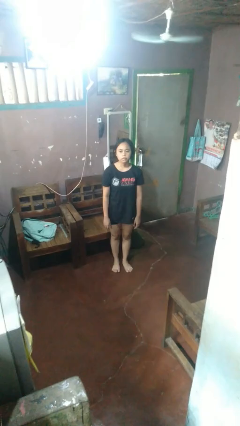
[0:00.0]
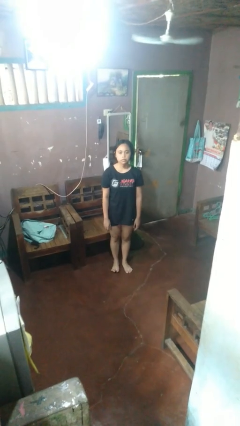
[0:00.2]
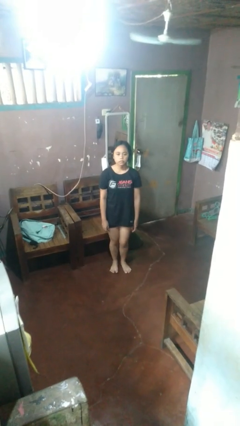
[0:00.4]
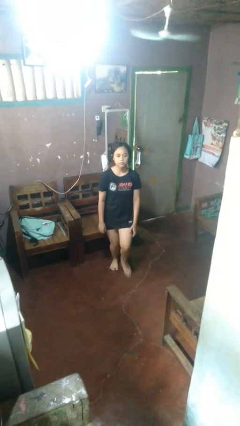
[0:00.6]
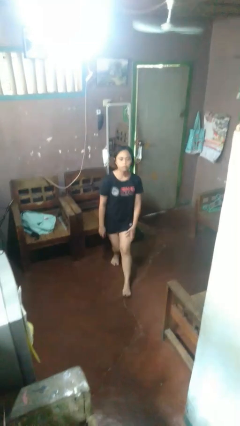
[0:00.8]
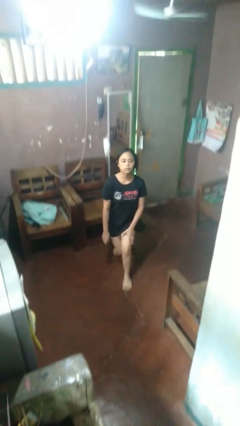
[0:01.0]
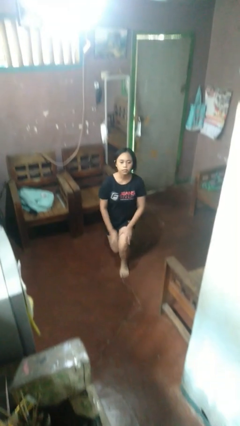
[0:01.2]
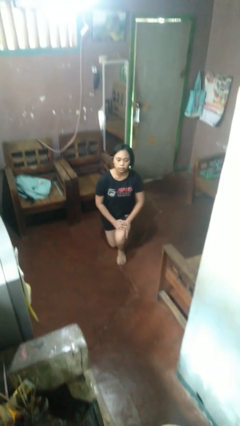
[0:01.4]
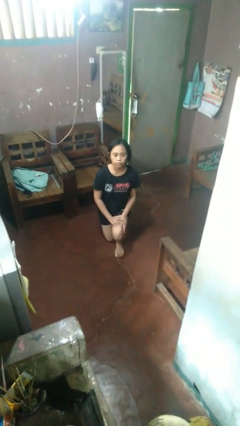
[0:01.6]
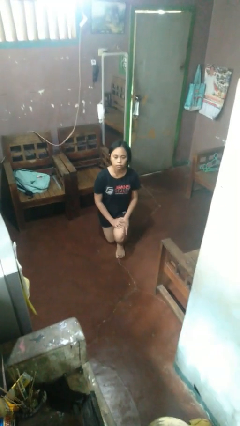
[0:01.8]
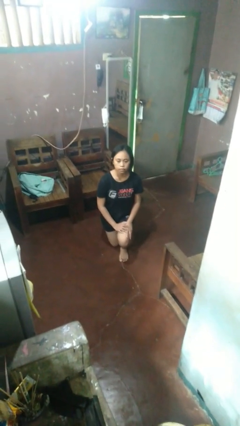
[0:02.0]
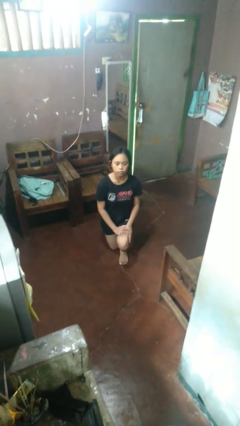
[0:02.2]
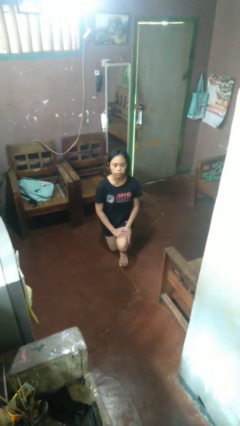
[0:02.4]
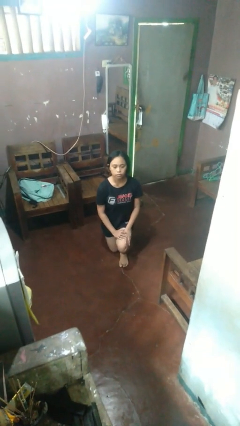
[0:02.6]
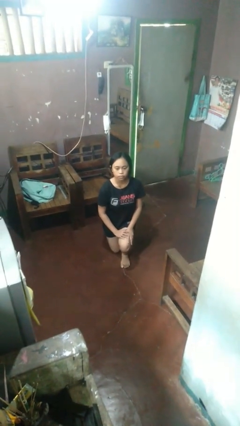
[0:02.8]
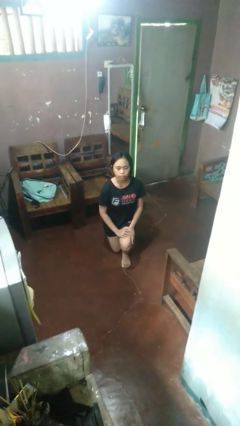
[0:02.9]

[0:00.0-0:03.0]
person kneels

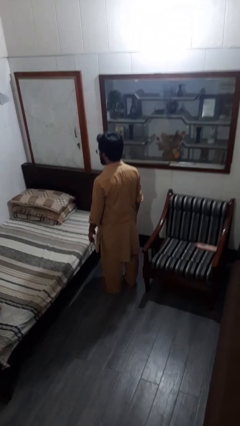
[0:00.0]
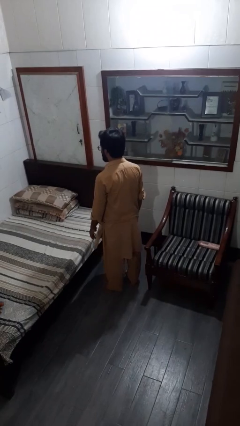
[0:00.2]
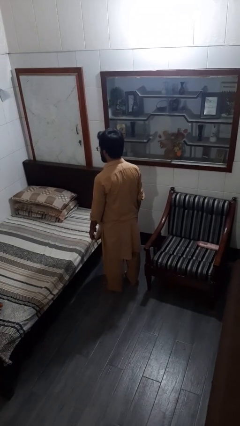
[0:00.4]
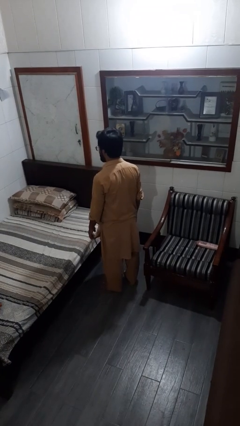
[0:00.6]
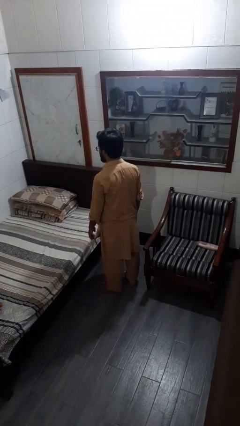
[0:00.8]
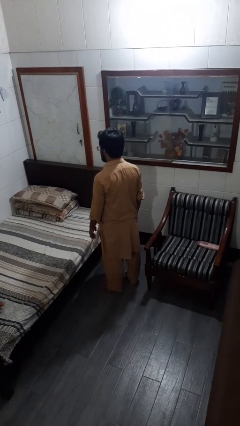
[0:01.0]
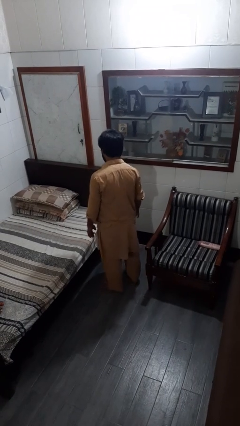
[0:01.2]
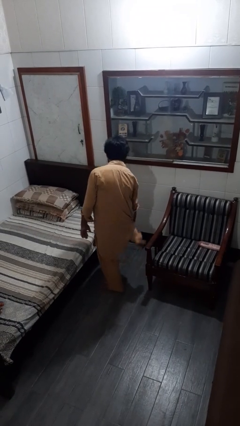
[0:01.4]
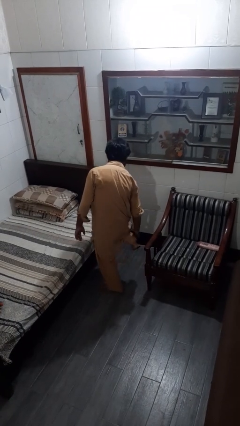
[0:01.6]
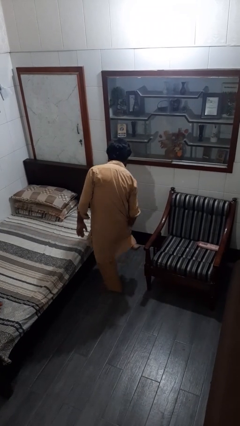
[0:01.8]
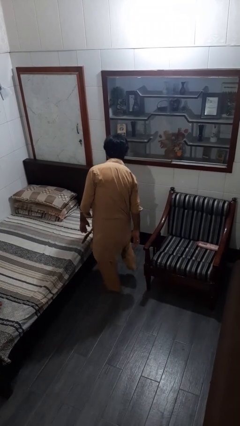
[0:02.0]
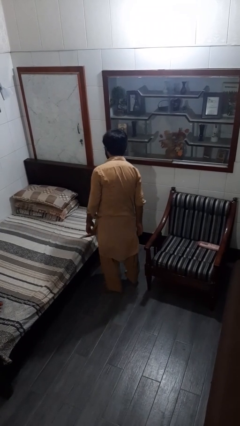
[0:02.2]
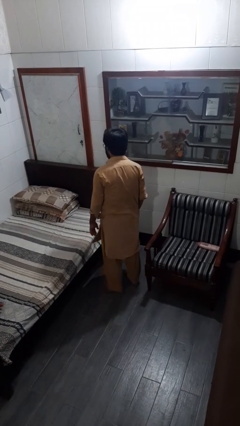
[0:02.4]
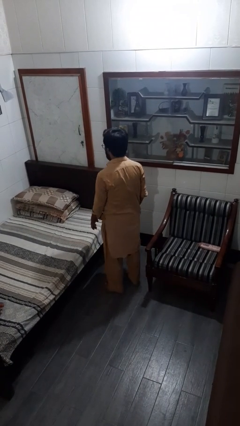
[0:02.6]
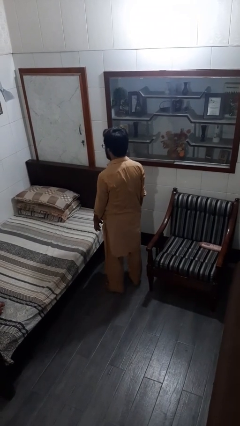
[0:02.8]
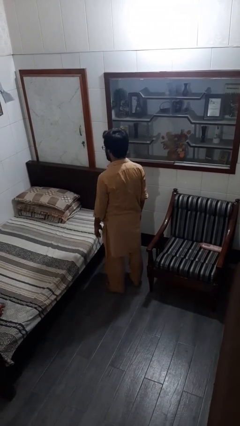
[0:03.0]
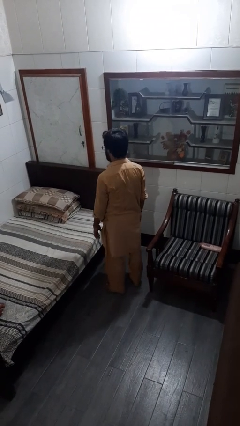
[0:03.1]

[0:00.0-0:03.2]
person swats bug

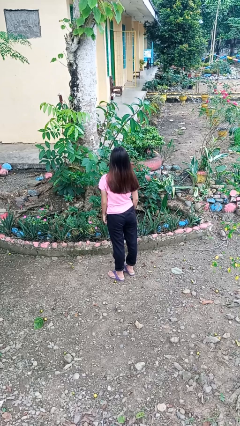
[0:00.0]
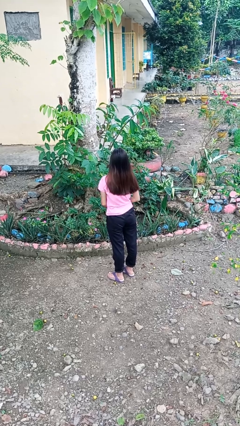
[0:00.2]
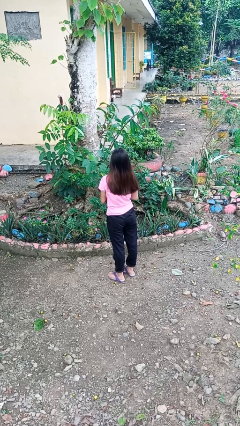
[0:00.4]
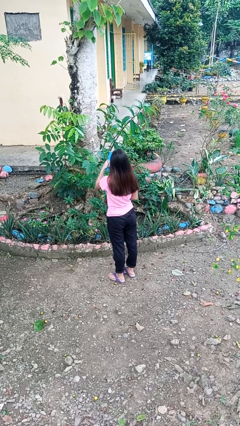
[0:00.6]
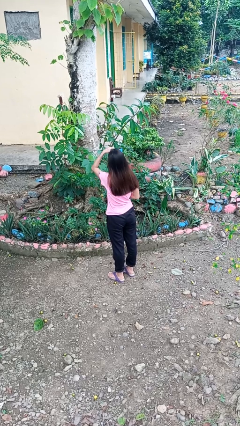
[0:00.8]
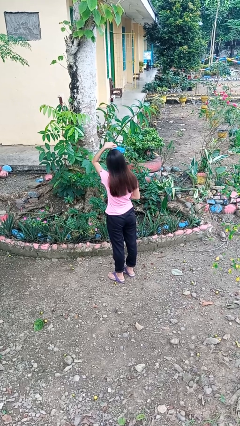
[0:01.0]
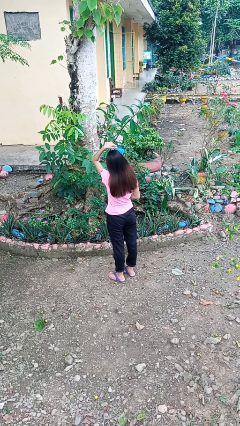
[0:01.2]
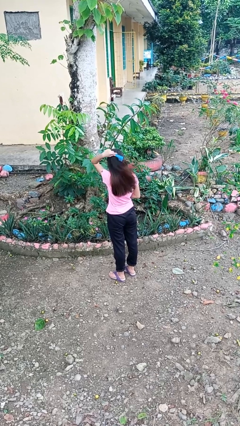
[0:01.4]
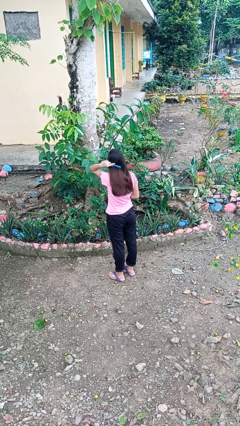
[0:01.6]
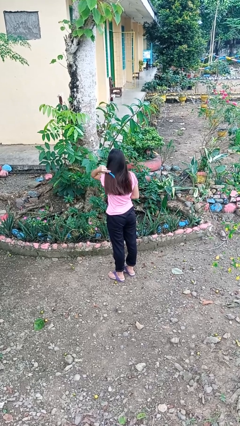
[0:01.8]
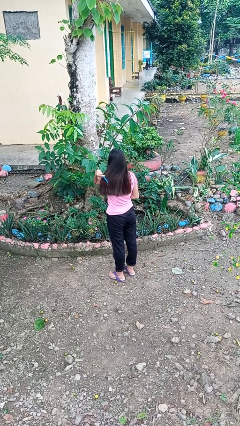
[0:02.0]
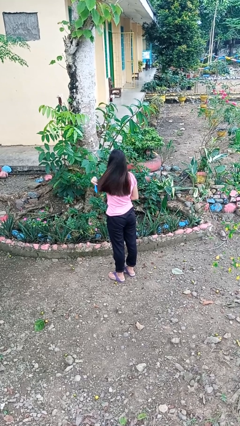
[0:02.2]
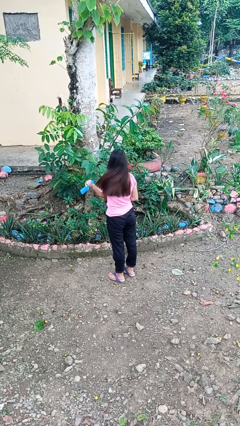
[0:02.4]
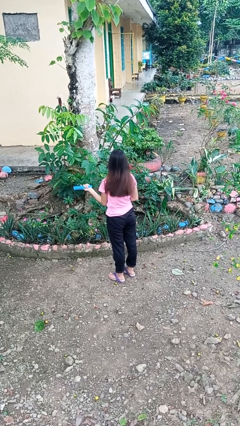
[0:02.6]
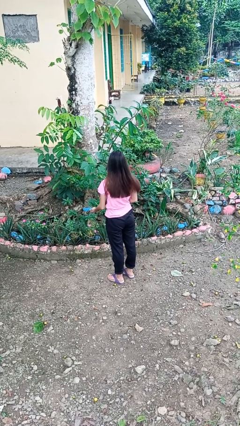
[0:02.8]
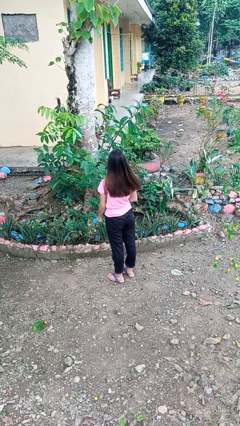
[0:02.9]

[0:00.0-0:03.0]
person brushes hair

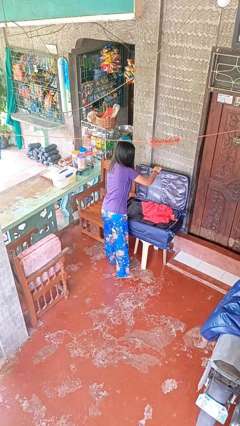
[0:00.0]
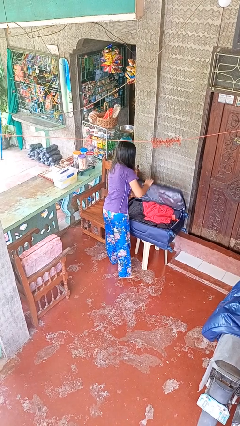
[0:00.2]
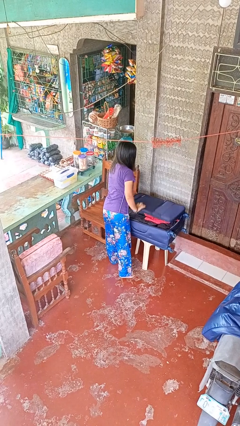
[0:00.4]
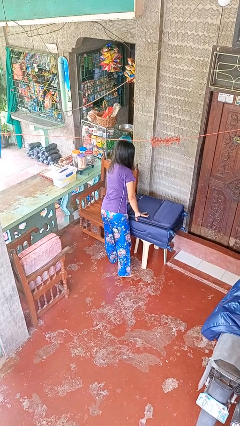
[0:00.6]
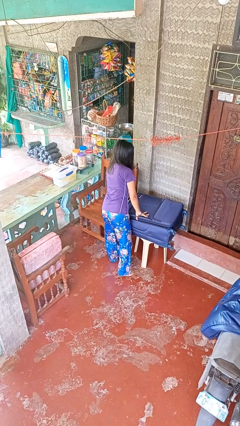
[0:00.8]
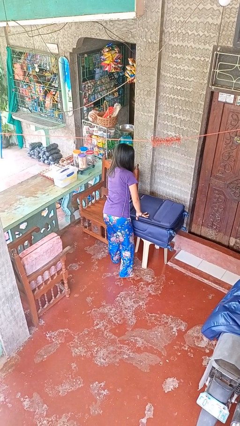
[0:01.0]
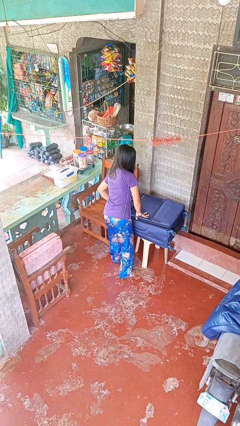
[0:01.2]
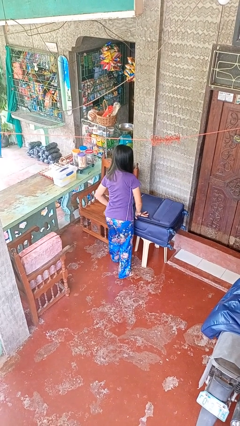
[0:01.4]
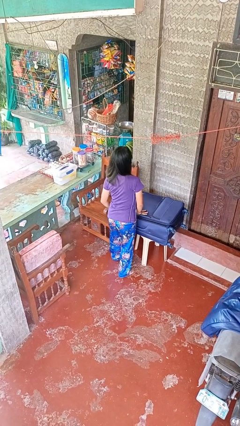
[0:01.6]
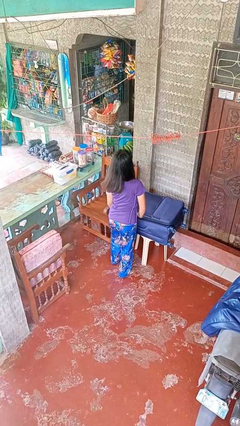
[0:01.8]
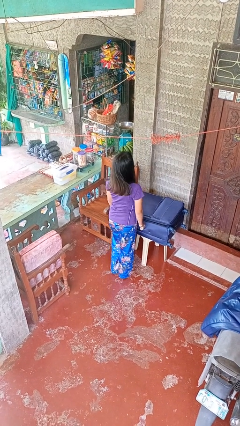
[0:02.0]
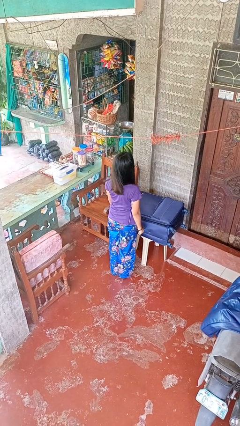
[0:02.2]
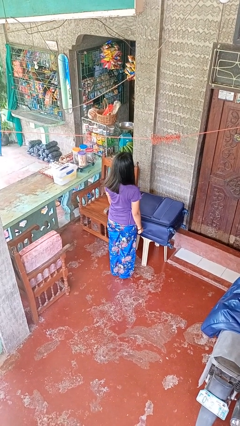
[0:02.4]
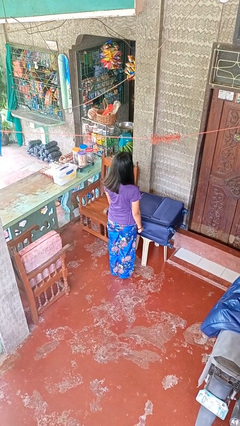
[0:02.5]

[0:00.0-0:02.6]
person closes suitcase

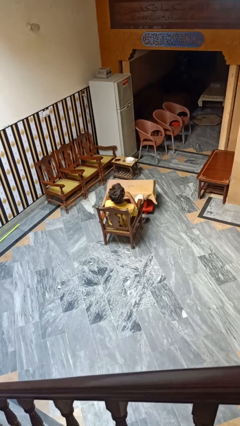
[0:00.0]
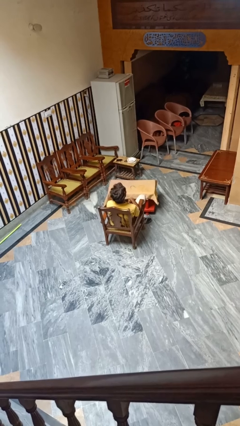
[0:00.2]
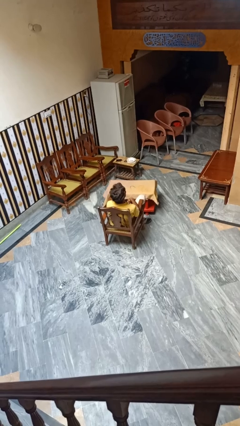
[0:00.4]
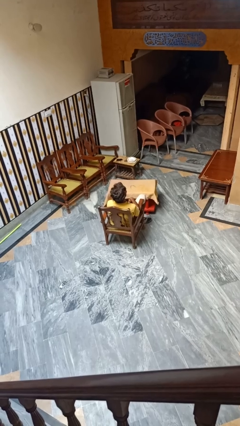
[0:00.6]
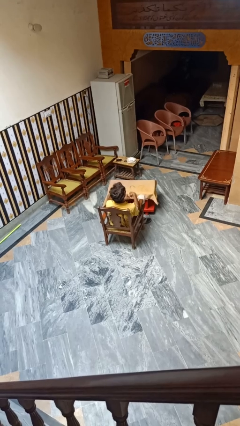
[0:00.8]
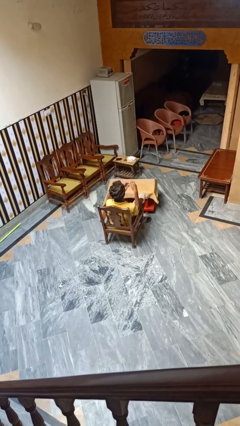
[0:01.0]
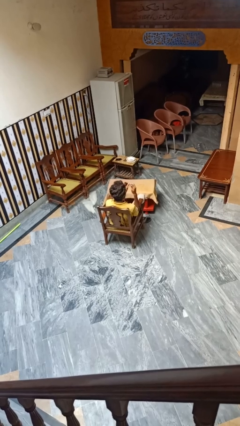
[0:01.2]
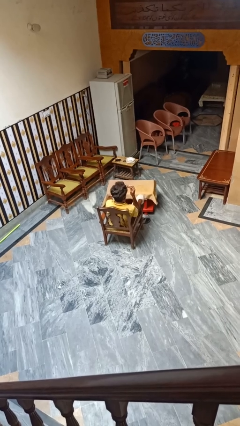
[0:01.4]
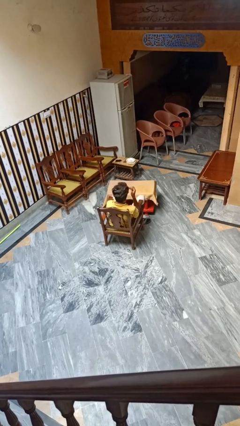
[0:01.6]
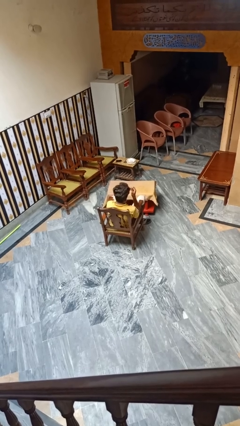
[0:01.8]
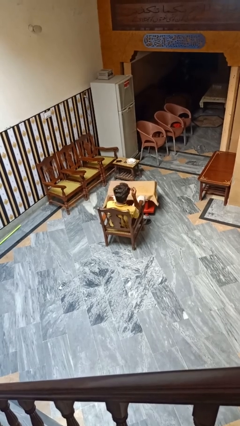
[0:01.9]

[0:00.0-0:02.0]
person clips fingernails

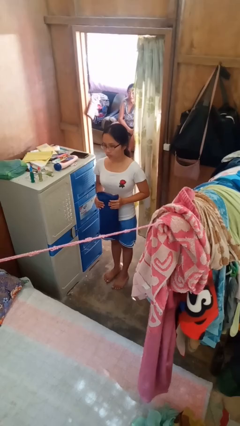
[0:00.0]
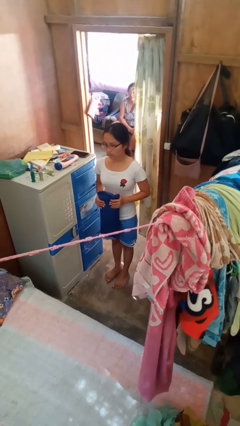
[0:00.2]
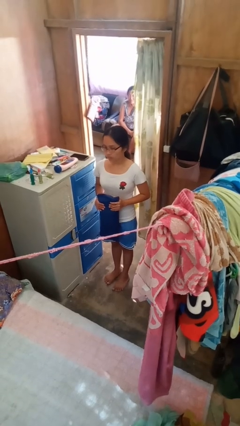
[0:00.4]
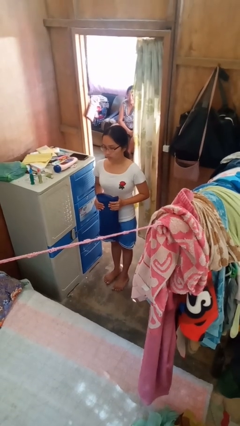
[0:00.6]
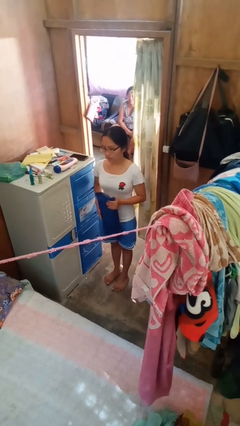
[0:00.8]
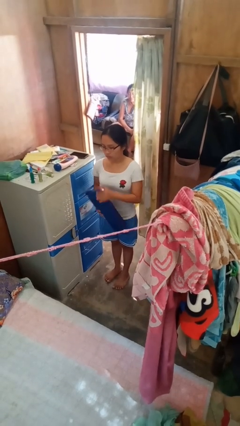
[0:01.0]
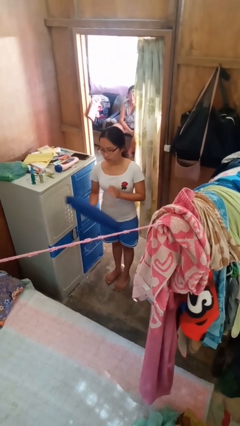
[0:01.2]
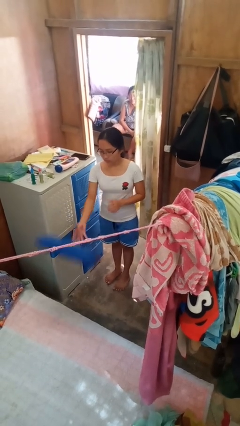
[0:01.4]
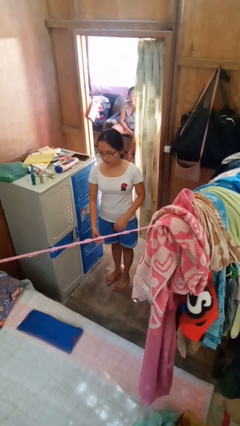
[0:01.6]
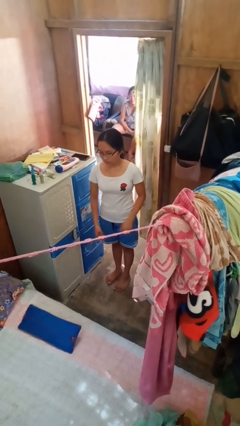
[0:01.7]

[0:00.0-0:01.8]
person throws object on bed

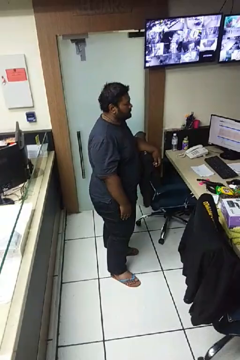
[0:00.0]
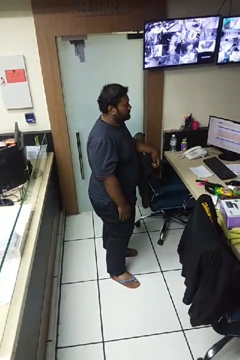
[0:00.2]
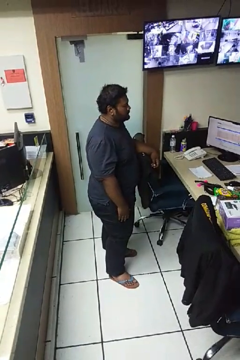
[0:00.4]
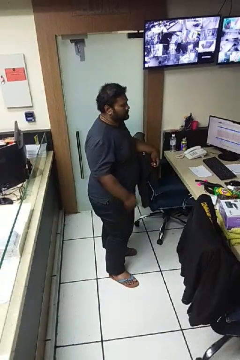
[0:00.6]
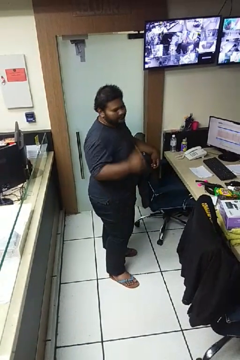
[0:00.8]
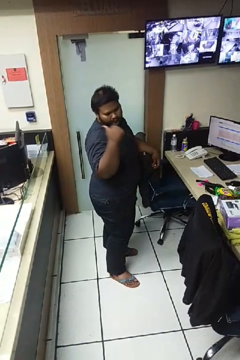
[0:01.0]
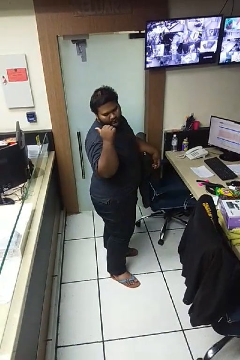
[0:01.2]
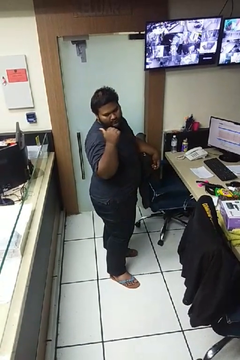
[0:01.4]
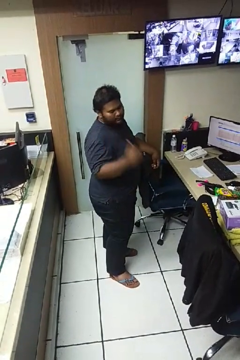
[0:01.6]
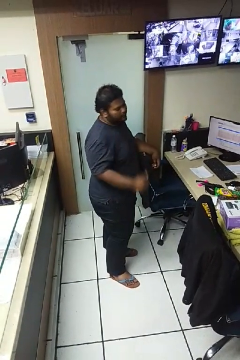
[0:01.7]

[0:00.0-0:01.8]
person gestures behind me
